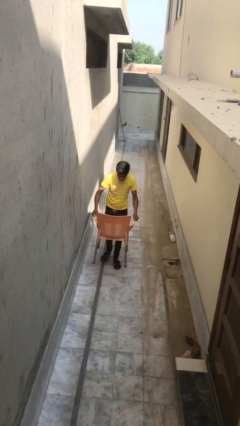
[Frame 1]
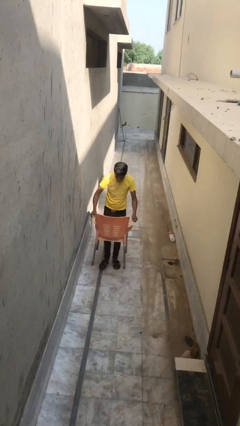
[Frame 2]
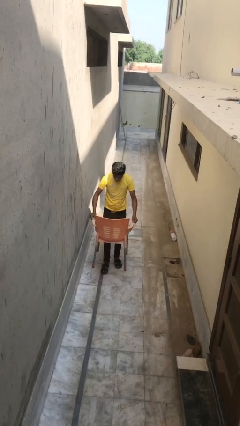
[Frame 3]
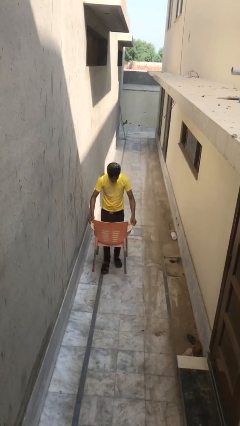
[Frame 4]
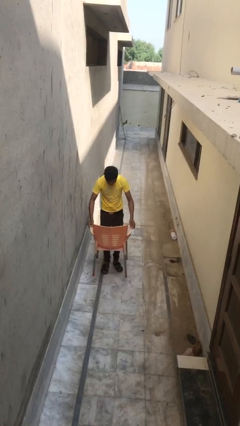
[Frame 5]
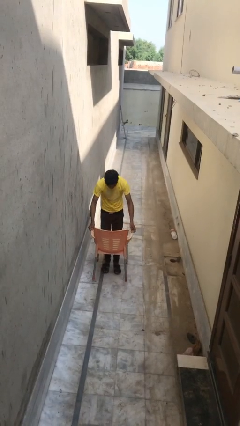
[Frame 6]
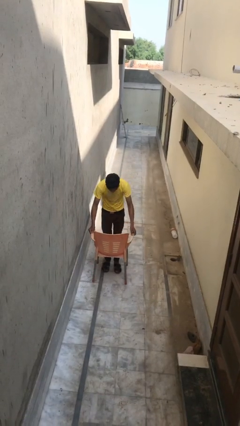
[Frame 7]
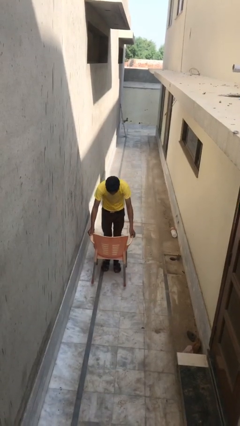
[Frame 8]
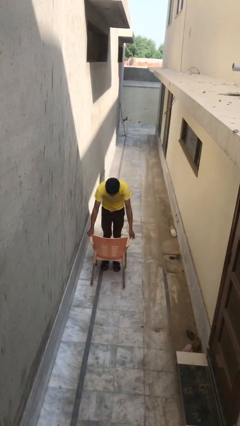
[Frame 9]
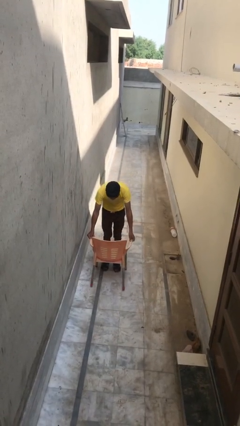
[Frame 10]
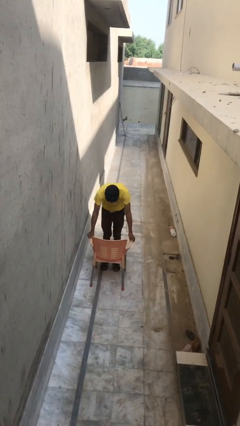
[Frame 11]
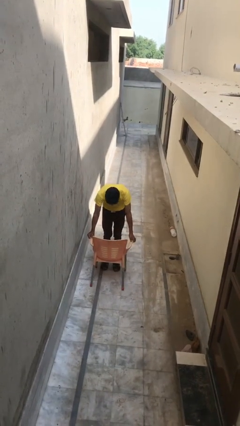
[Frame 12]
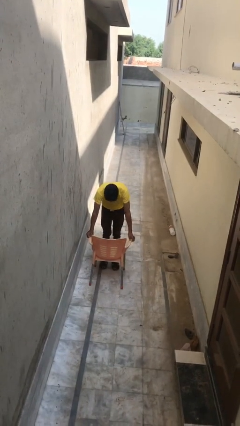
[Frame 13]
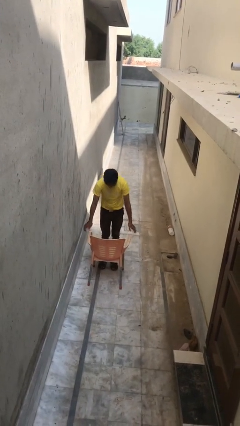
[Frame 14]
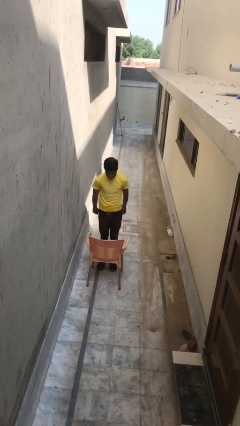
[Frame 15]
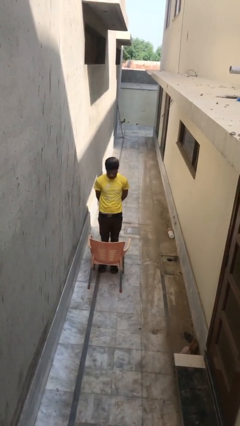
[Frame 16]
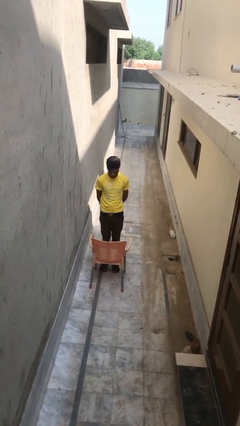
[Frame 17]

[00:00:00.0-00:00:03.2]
person puts down object on floor

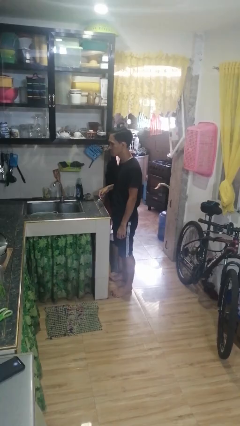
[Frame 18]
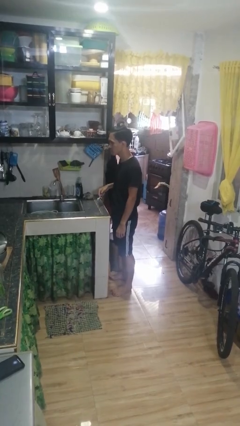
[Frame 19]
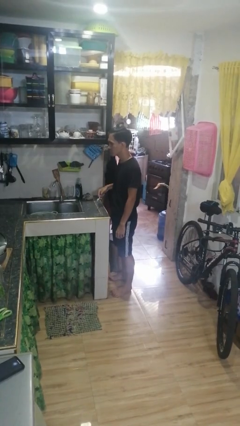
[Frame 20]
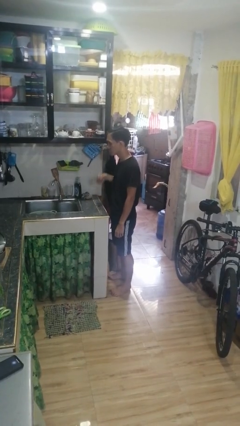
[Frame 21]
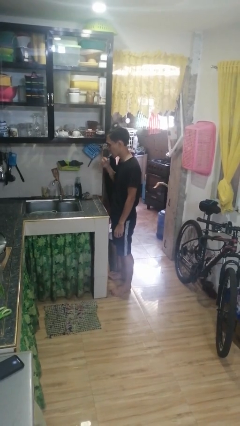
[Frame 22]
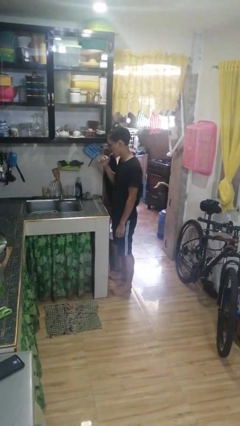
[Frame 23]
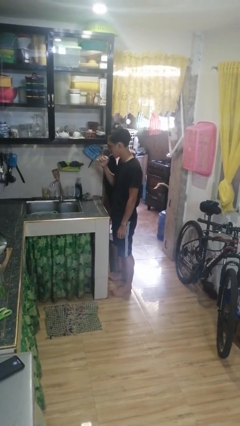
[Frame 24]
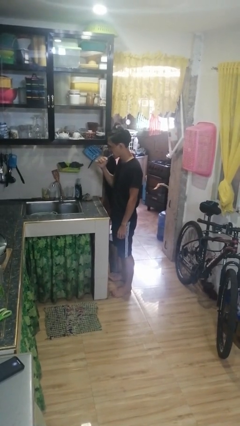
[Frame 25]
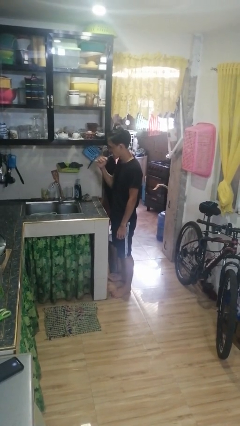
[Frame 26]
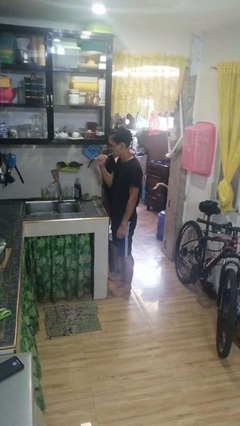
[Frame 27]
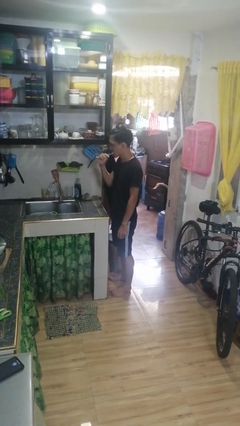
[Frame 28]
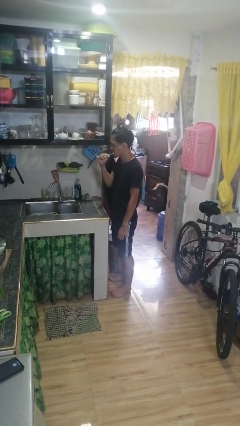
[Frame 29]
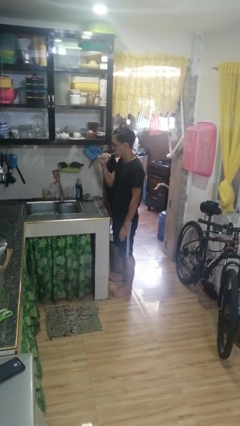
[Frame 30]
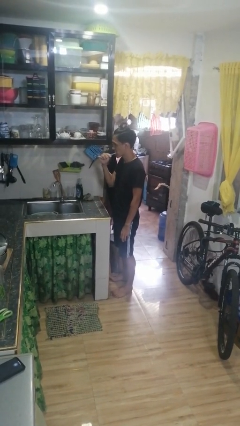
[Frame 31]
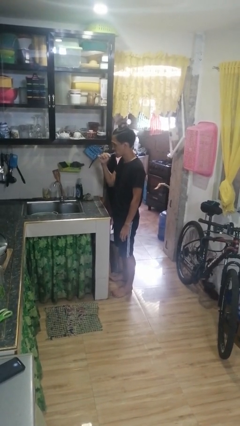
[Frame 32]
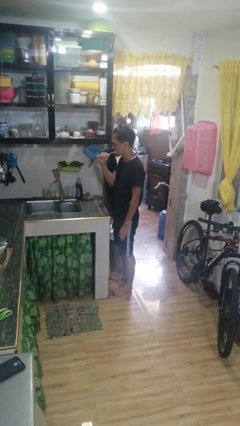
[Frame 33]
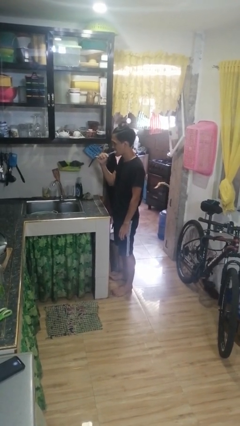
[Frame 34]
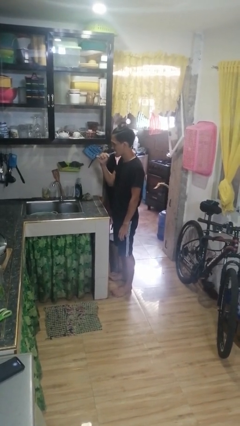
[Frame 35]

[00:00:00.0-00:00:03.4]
person brushes teeth

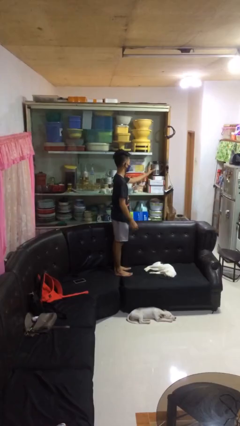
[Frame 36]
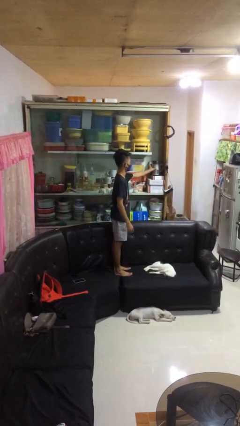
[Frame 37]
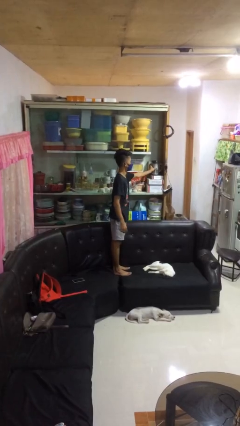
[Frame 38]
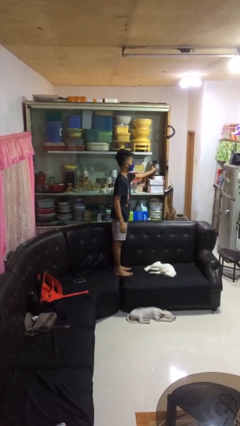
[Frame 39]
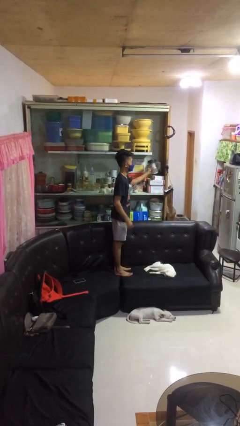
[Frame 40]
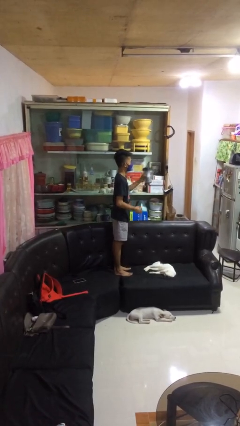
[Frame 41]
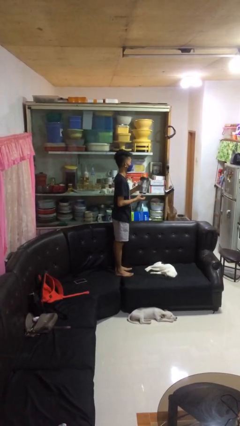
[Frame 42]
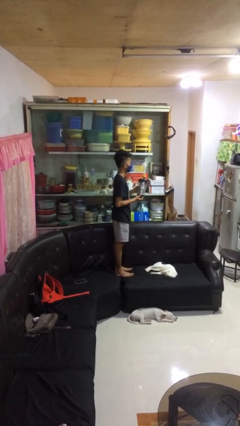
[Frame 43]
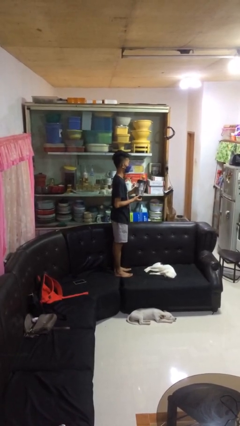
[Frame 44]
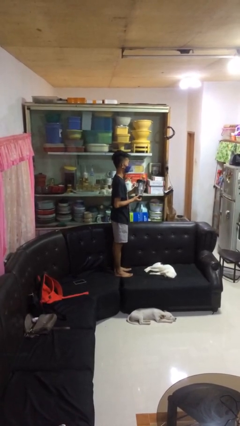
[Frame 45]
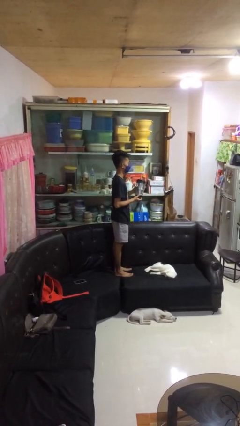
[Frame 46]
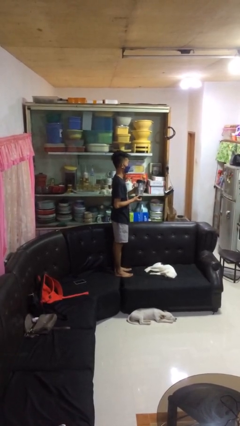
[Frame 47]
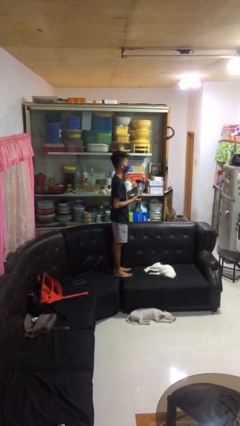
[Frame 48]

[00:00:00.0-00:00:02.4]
person picks up object from cabinet

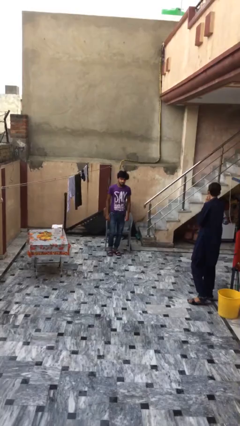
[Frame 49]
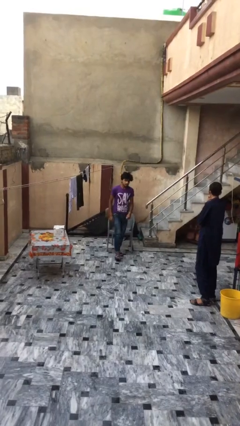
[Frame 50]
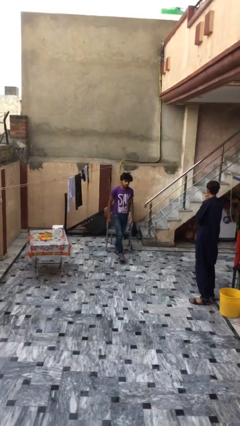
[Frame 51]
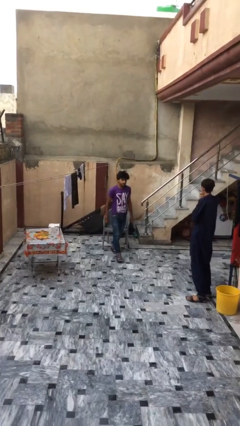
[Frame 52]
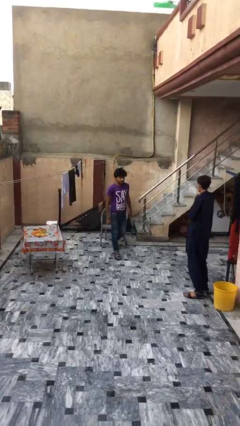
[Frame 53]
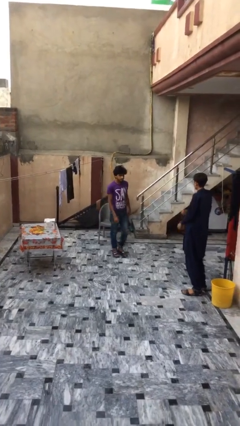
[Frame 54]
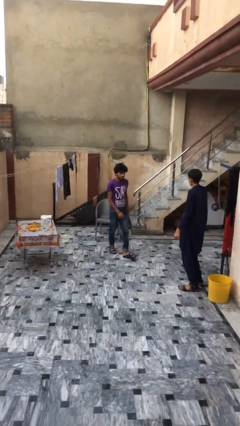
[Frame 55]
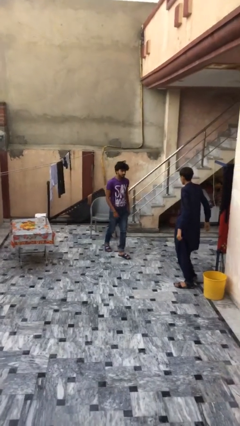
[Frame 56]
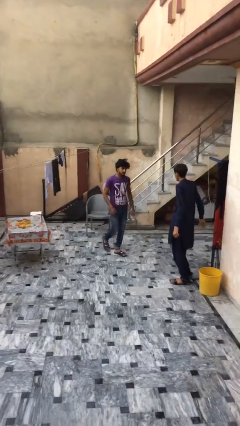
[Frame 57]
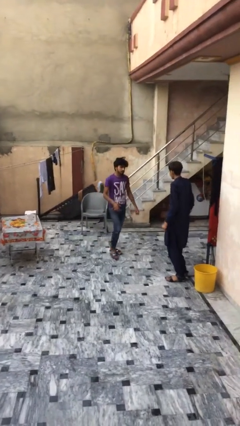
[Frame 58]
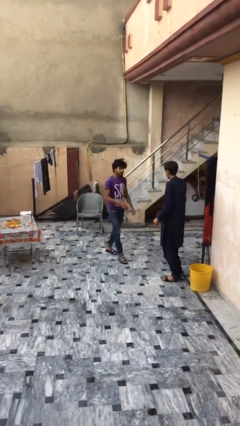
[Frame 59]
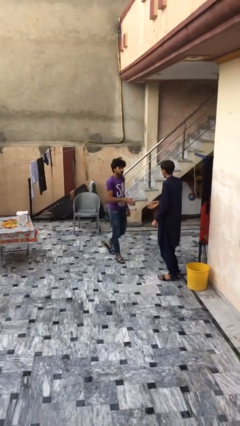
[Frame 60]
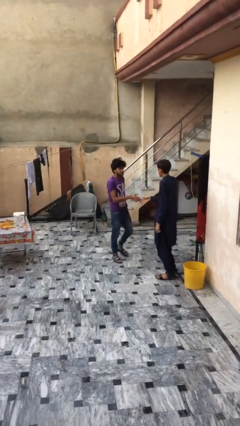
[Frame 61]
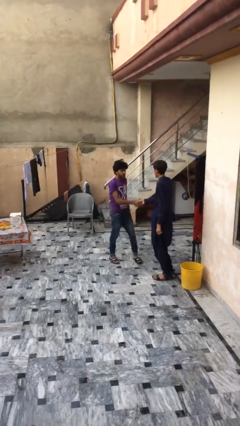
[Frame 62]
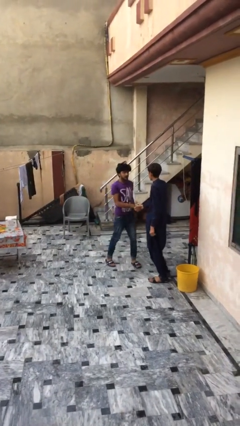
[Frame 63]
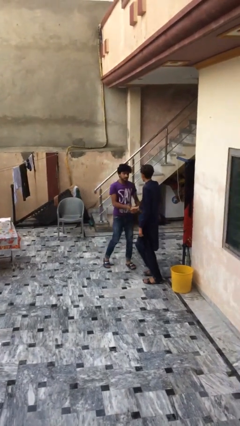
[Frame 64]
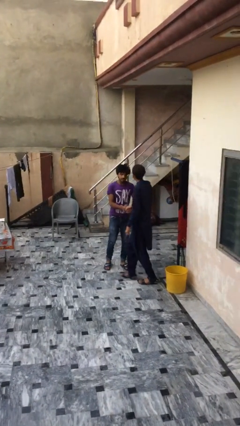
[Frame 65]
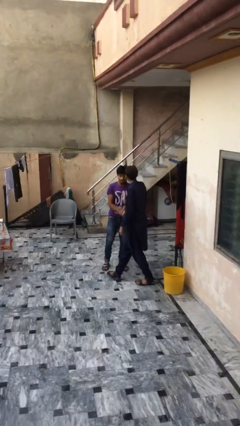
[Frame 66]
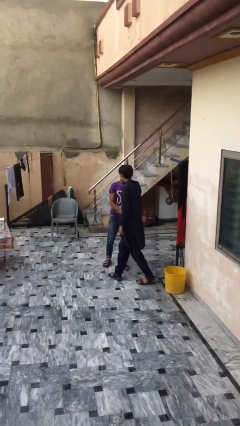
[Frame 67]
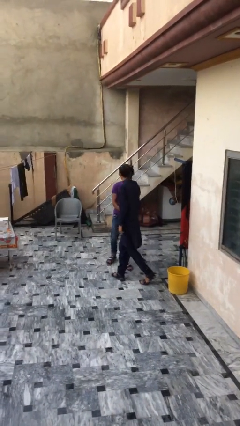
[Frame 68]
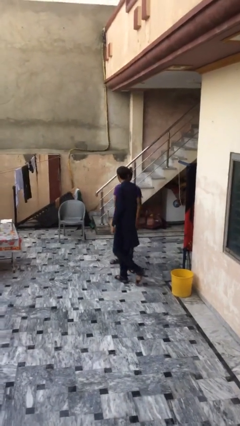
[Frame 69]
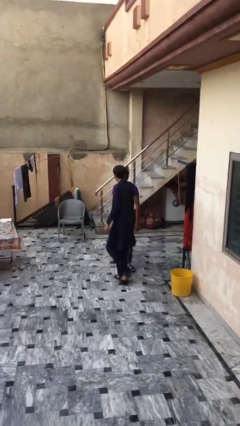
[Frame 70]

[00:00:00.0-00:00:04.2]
person shakes hand

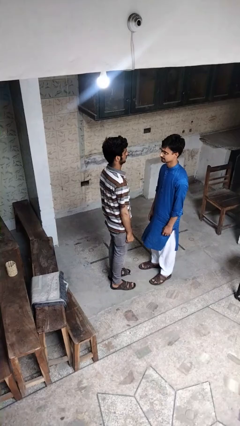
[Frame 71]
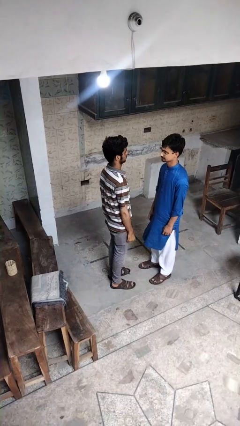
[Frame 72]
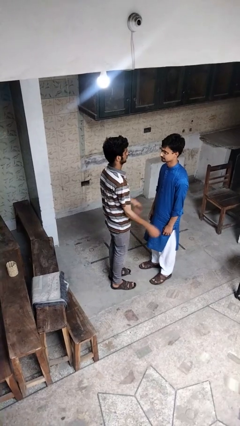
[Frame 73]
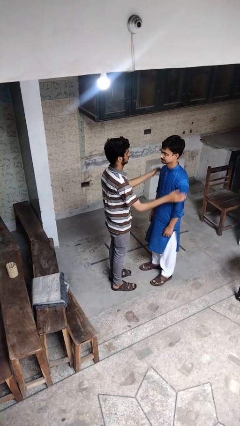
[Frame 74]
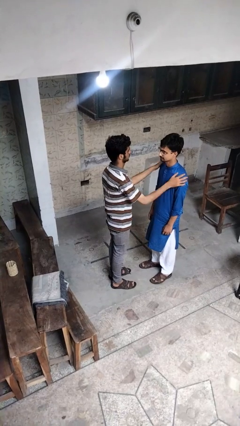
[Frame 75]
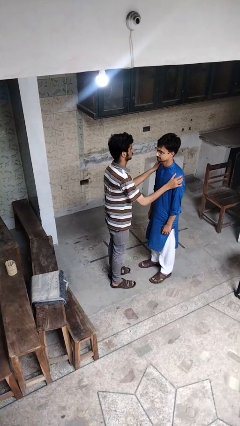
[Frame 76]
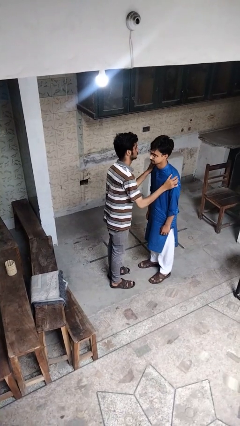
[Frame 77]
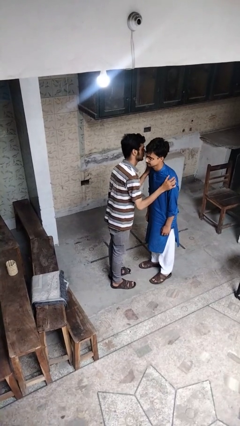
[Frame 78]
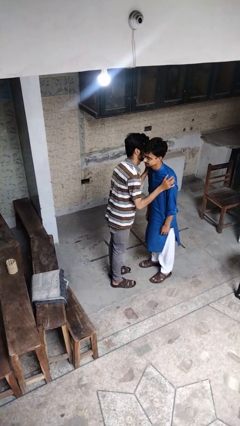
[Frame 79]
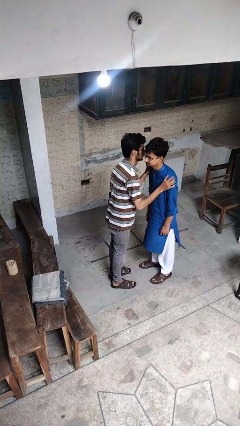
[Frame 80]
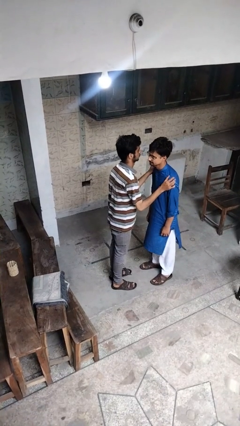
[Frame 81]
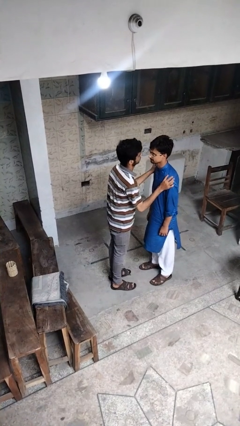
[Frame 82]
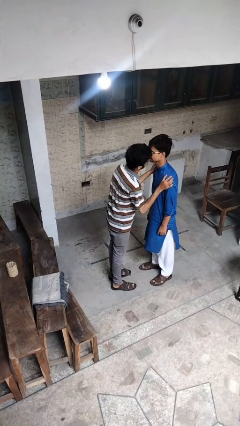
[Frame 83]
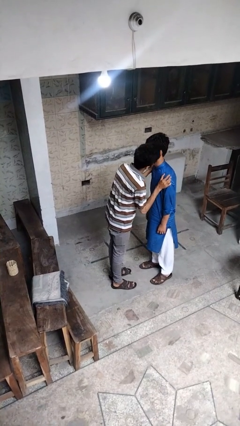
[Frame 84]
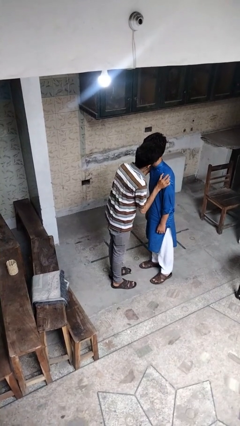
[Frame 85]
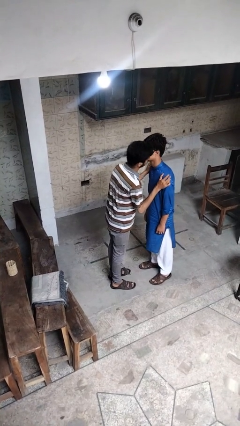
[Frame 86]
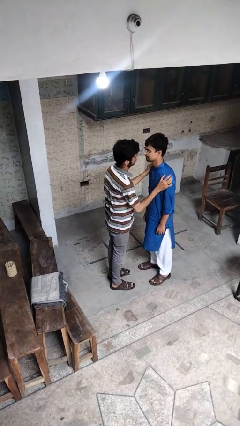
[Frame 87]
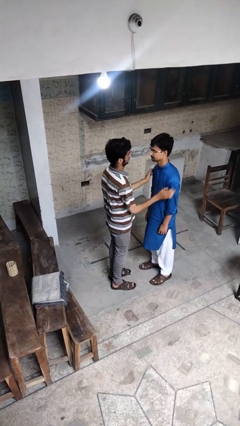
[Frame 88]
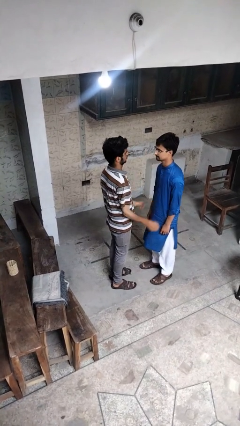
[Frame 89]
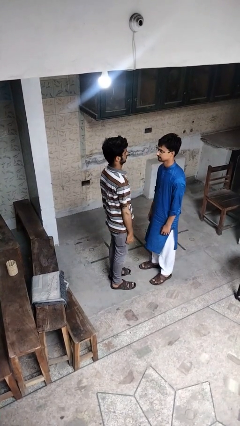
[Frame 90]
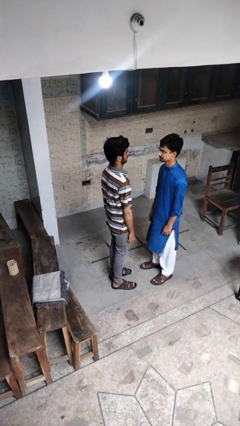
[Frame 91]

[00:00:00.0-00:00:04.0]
person kisses cheek of person
